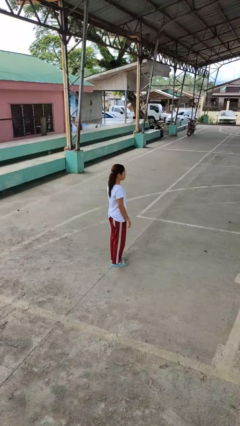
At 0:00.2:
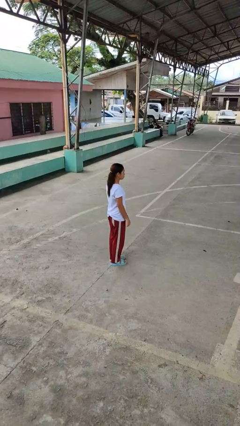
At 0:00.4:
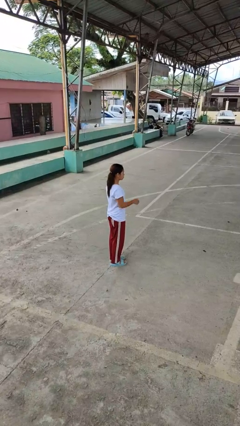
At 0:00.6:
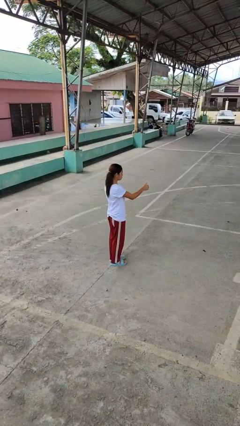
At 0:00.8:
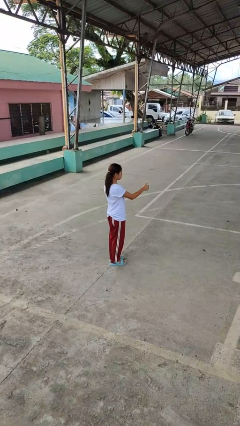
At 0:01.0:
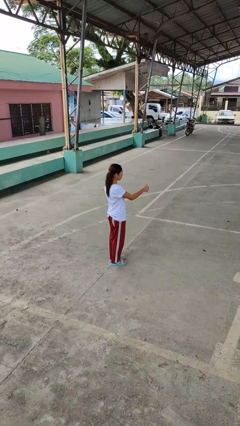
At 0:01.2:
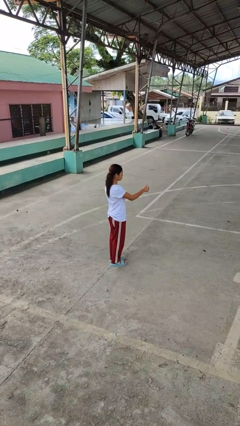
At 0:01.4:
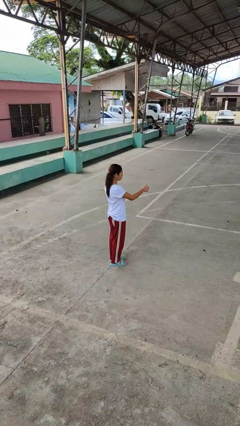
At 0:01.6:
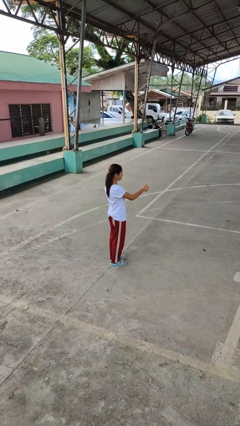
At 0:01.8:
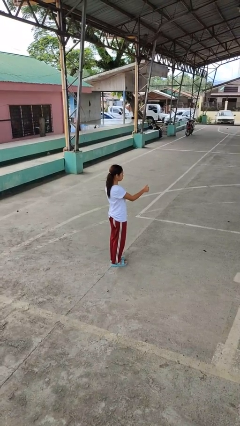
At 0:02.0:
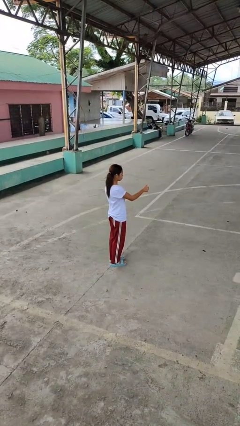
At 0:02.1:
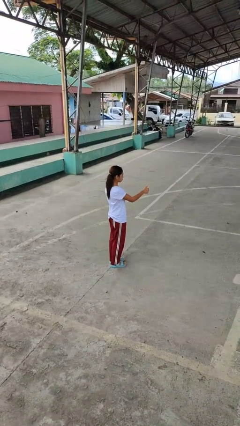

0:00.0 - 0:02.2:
person gestures thumbs up

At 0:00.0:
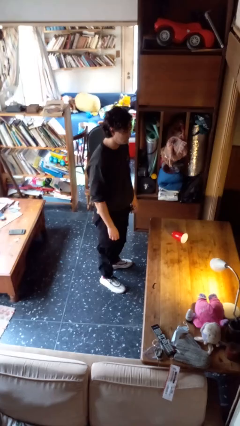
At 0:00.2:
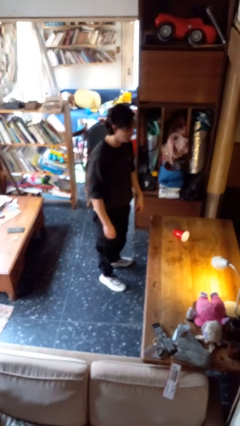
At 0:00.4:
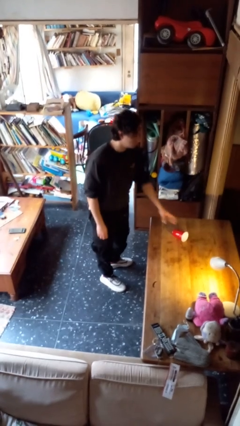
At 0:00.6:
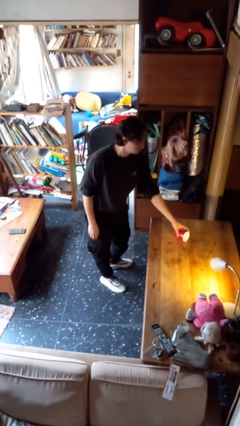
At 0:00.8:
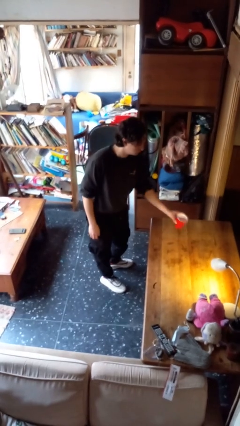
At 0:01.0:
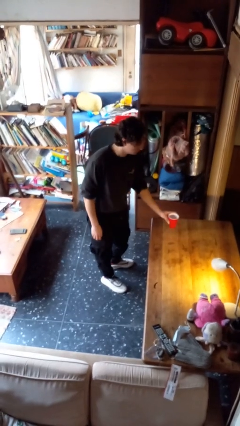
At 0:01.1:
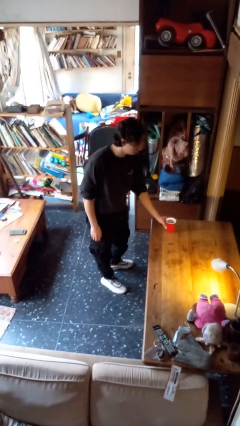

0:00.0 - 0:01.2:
person sets upright glass

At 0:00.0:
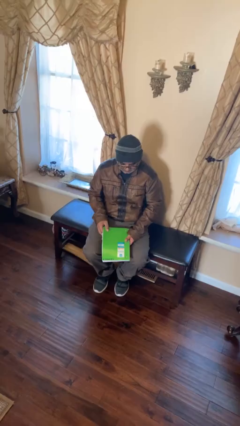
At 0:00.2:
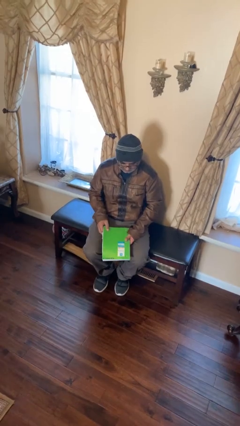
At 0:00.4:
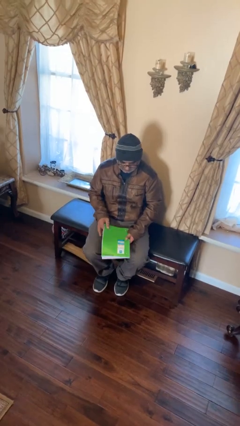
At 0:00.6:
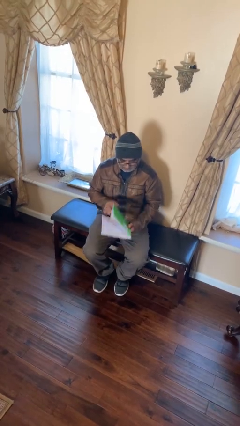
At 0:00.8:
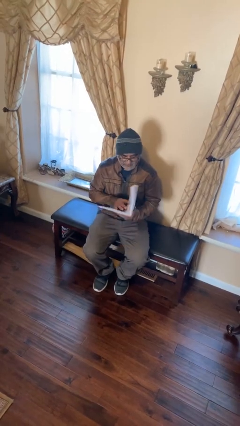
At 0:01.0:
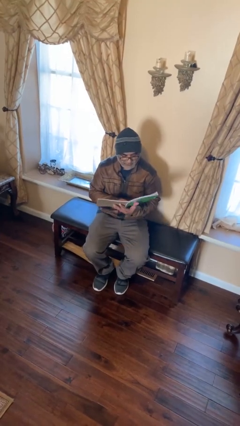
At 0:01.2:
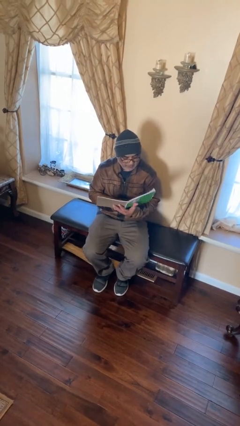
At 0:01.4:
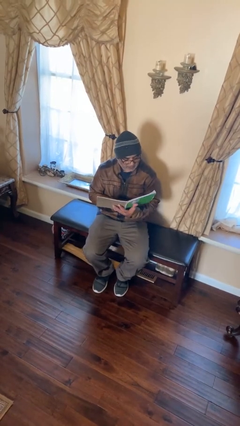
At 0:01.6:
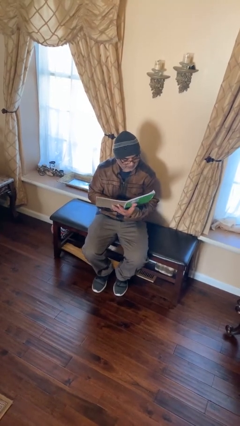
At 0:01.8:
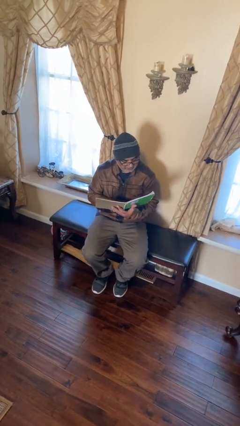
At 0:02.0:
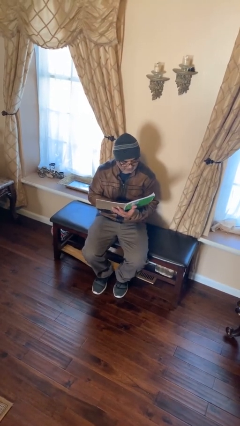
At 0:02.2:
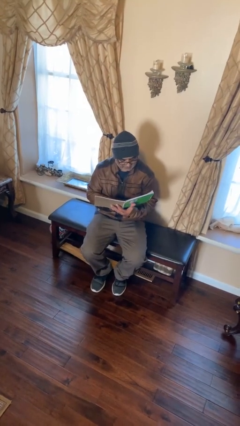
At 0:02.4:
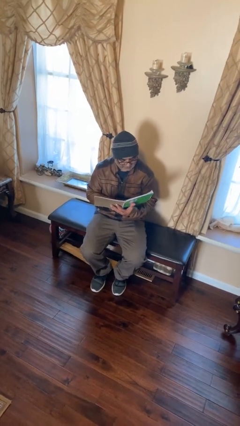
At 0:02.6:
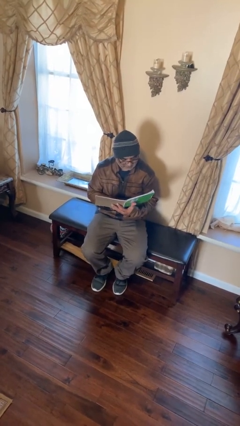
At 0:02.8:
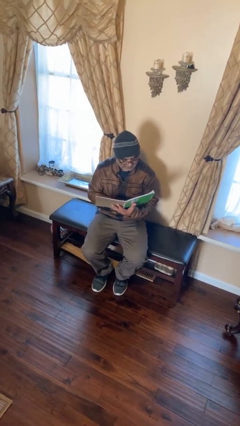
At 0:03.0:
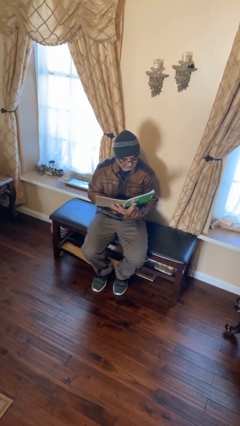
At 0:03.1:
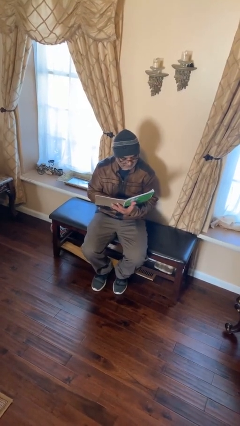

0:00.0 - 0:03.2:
person reads document

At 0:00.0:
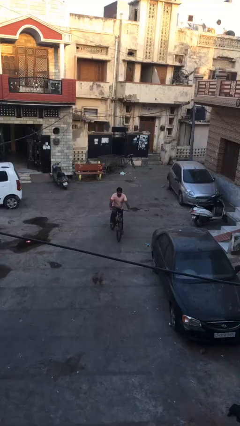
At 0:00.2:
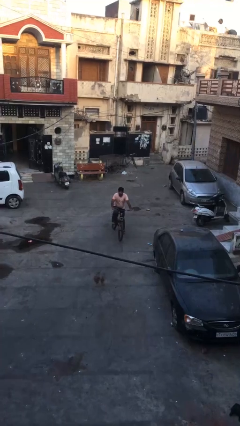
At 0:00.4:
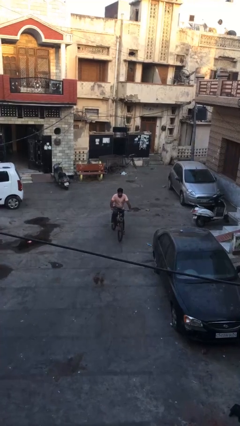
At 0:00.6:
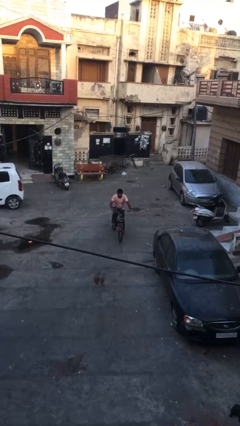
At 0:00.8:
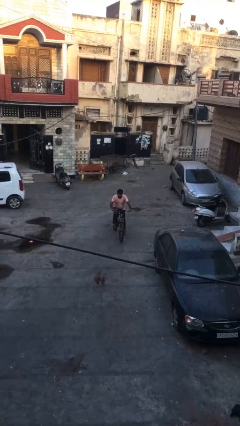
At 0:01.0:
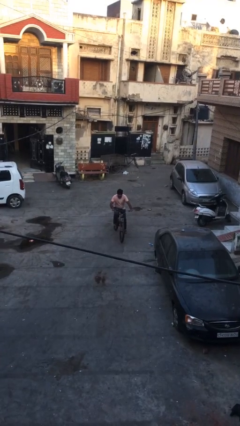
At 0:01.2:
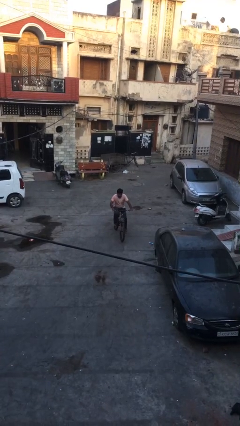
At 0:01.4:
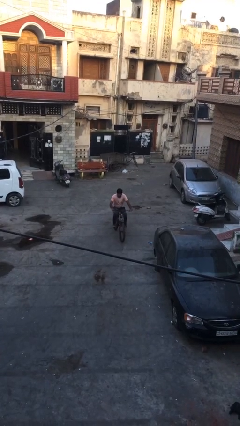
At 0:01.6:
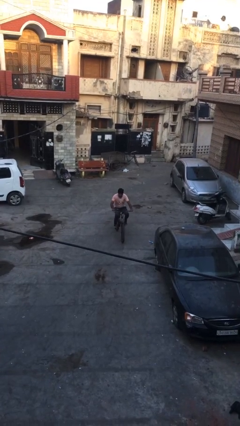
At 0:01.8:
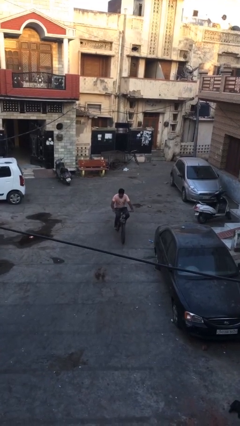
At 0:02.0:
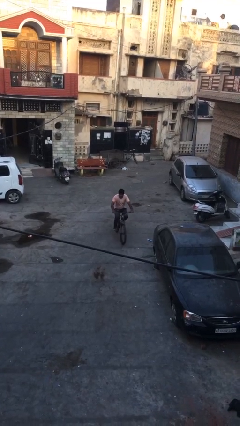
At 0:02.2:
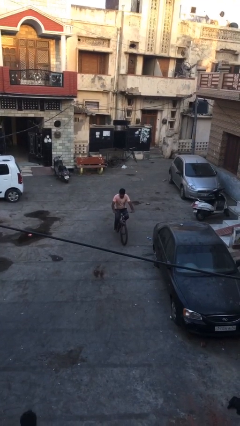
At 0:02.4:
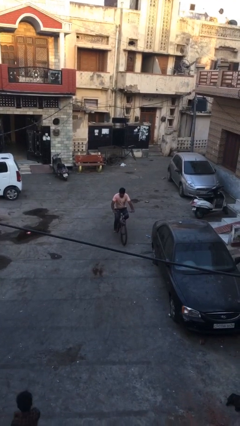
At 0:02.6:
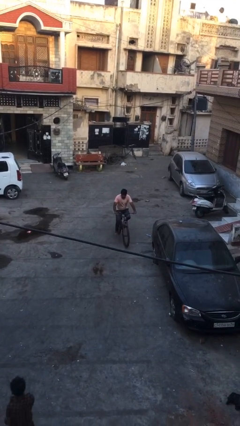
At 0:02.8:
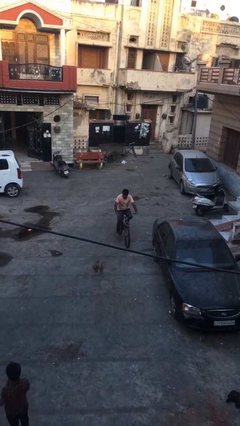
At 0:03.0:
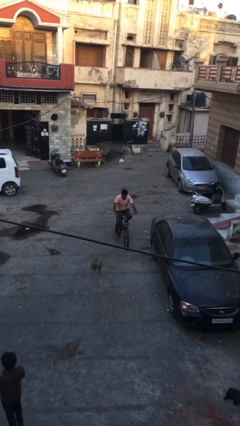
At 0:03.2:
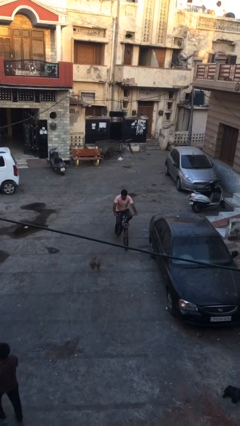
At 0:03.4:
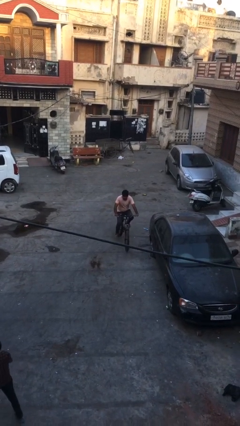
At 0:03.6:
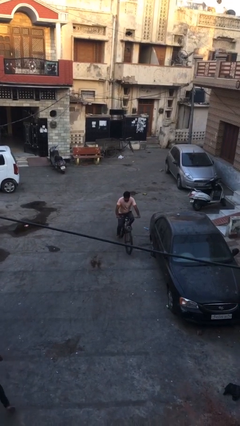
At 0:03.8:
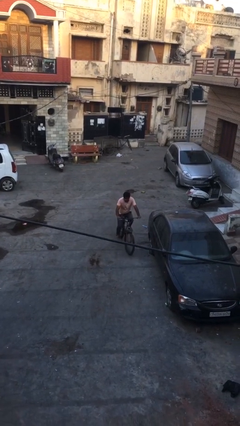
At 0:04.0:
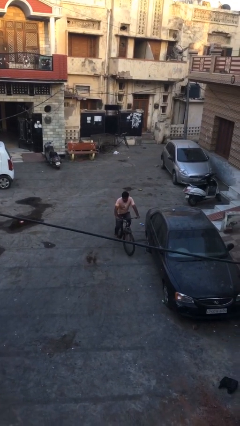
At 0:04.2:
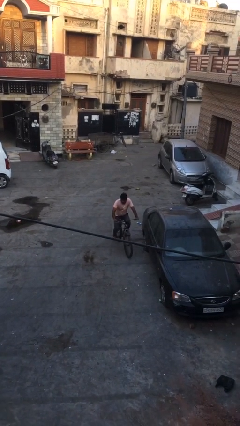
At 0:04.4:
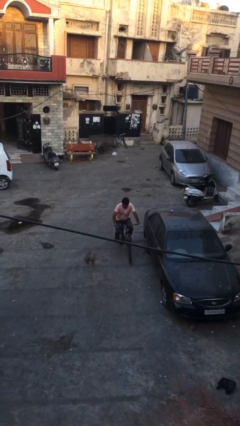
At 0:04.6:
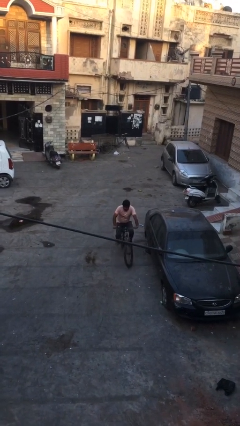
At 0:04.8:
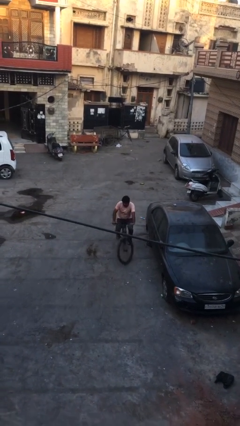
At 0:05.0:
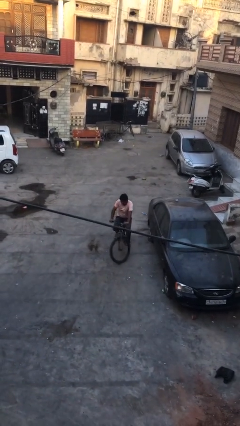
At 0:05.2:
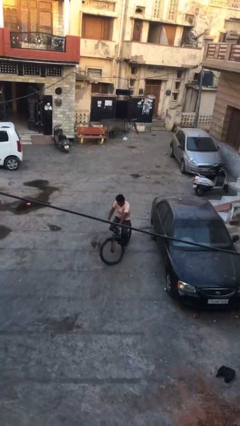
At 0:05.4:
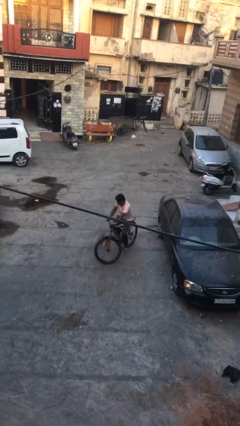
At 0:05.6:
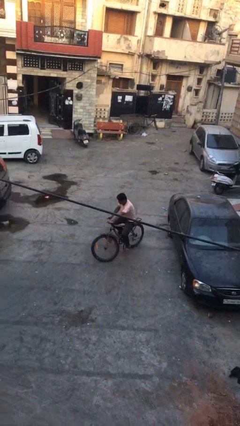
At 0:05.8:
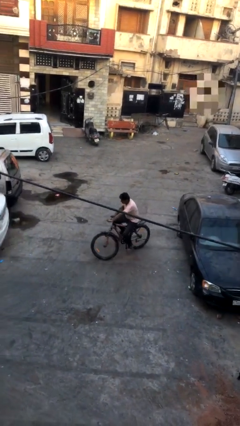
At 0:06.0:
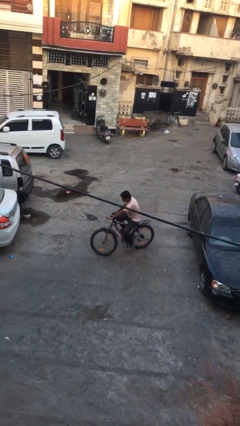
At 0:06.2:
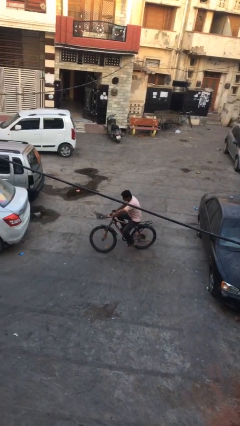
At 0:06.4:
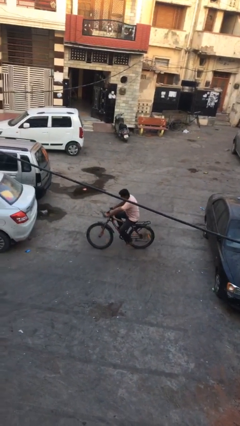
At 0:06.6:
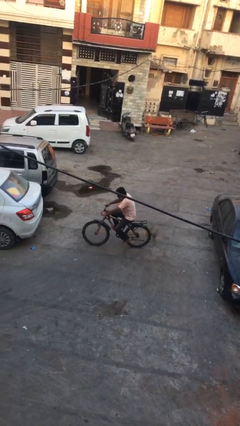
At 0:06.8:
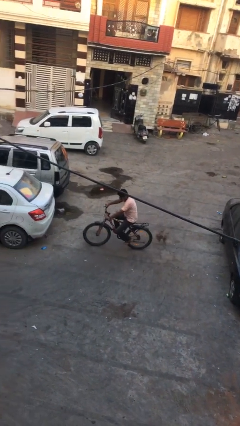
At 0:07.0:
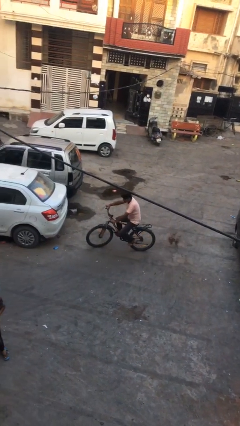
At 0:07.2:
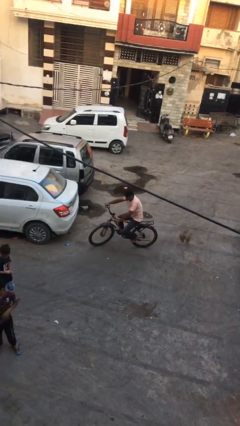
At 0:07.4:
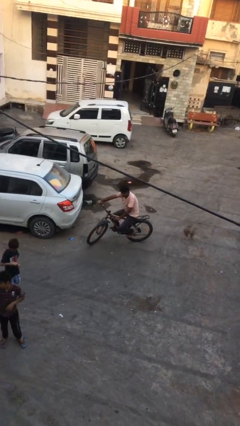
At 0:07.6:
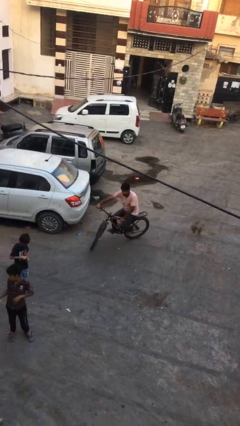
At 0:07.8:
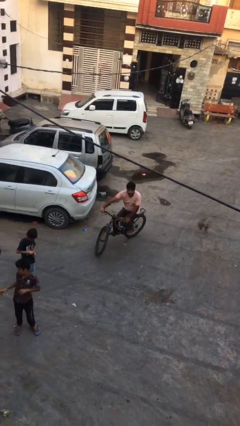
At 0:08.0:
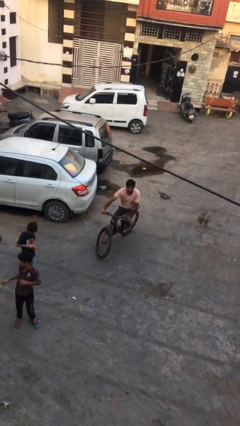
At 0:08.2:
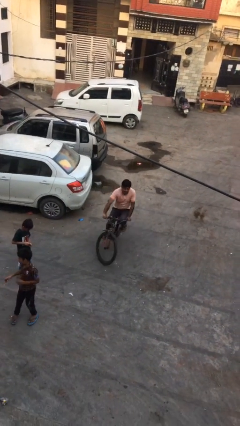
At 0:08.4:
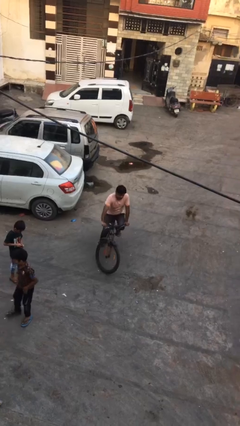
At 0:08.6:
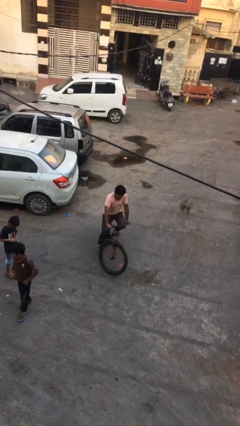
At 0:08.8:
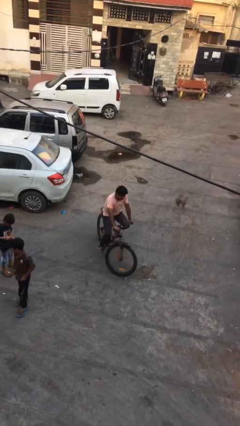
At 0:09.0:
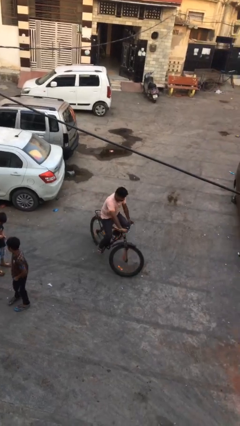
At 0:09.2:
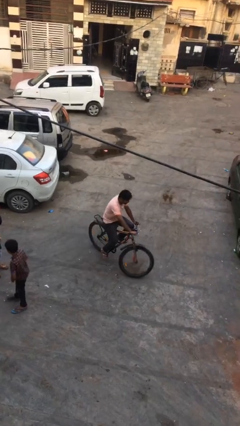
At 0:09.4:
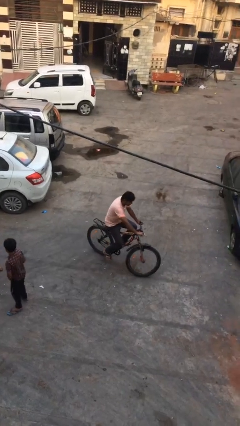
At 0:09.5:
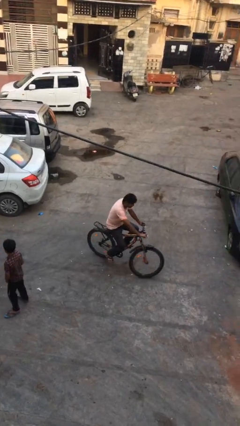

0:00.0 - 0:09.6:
person rides bicycle

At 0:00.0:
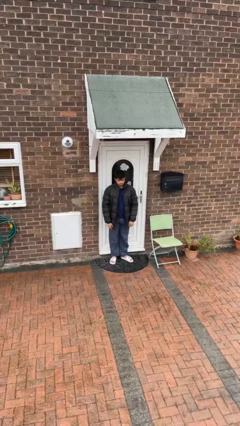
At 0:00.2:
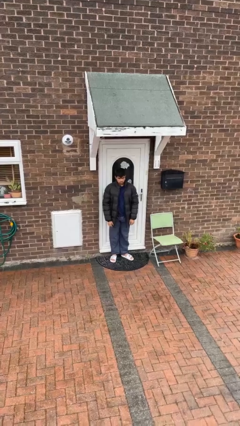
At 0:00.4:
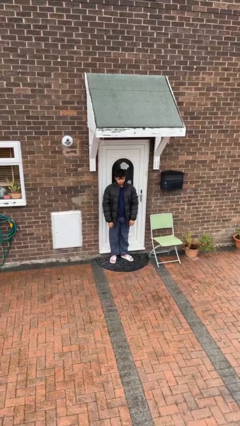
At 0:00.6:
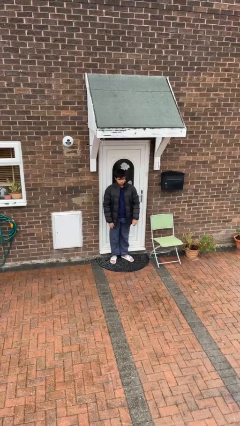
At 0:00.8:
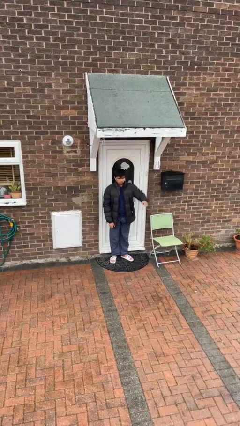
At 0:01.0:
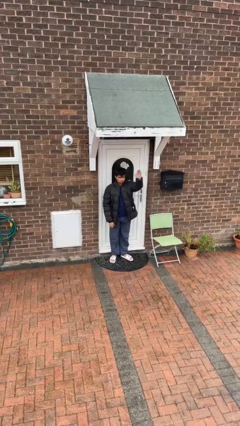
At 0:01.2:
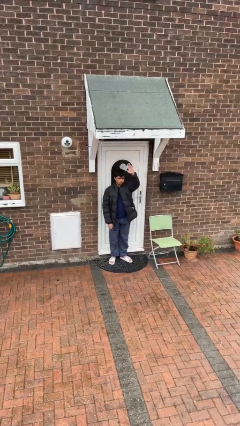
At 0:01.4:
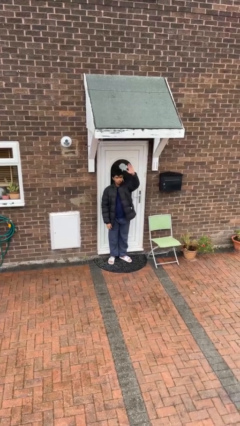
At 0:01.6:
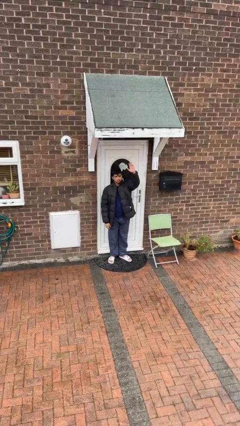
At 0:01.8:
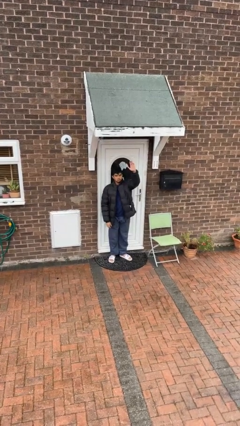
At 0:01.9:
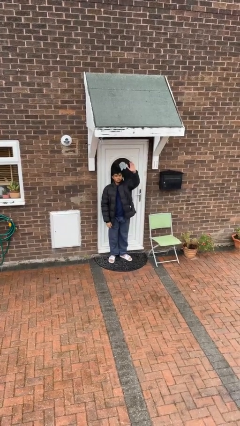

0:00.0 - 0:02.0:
person gestures raise hand
